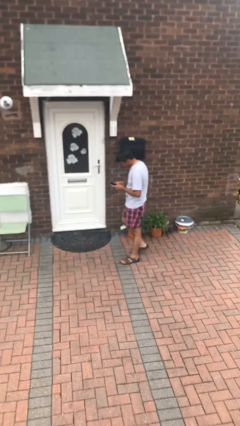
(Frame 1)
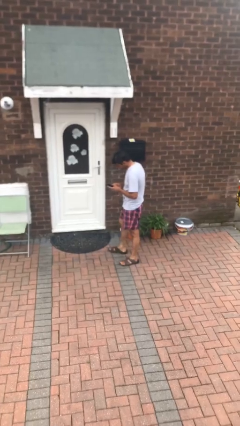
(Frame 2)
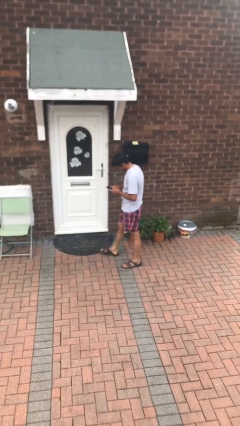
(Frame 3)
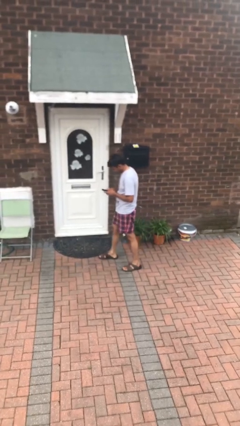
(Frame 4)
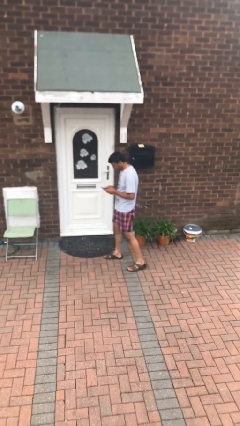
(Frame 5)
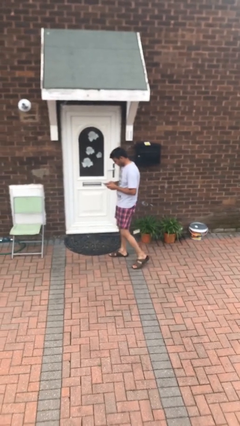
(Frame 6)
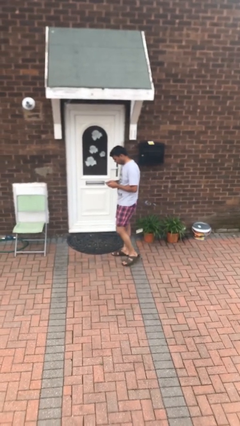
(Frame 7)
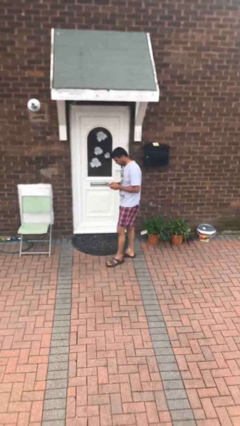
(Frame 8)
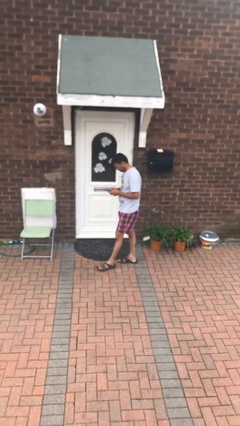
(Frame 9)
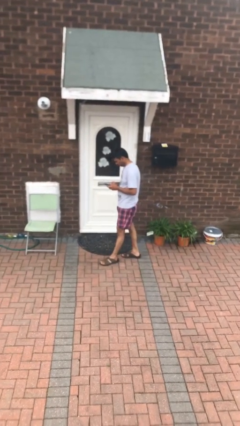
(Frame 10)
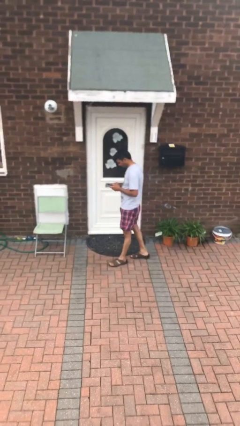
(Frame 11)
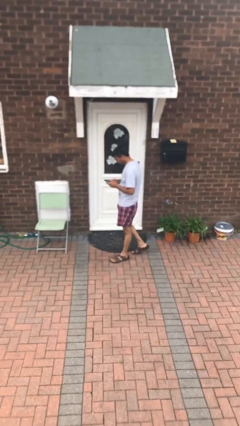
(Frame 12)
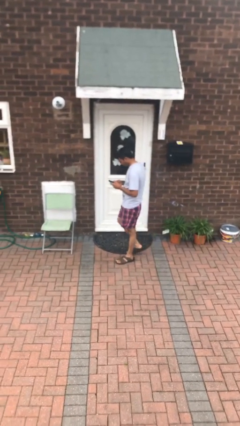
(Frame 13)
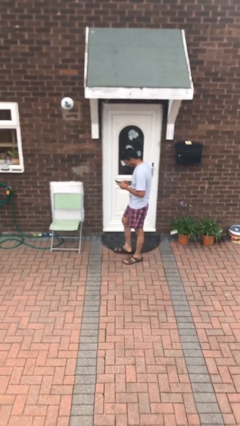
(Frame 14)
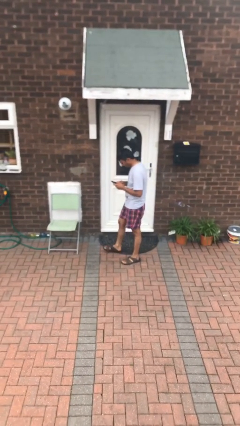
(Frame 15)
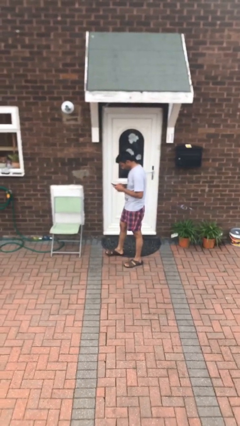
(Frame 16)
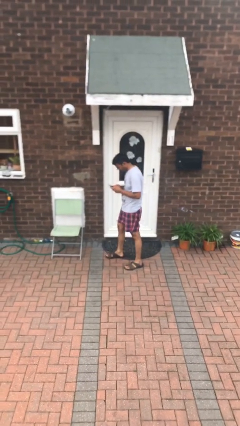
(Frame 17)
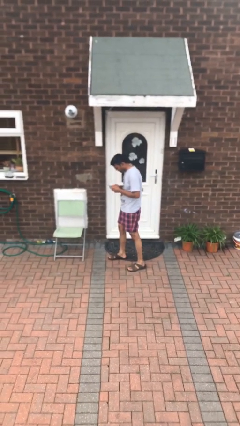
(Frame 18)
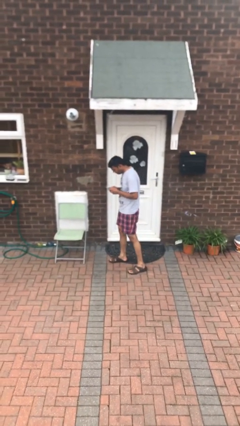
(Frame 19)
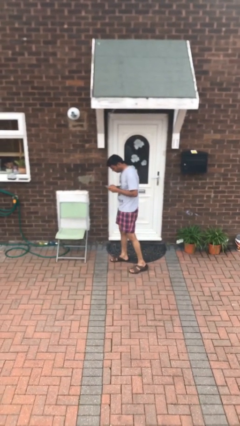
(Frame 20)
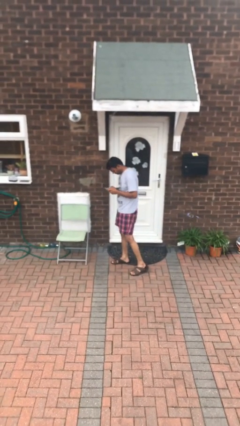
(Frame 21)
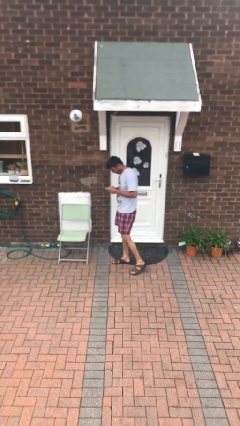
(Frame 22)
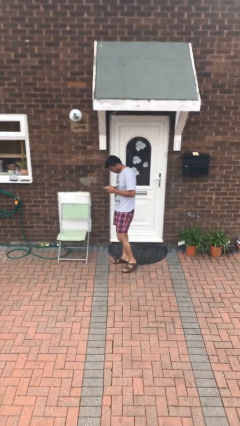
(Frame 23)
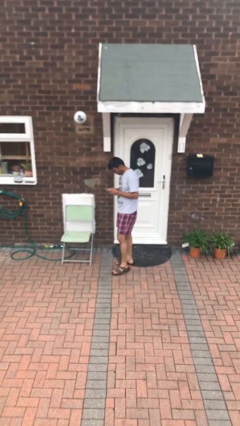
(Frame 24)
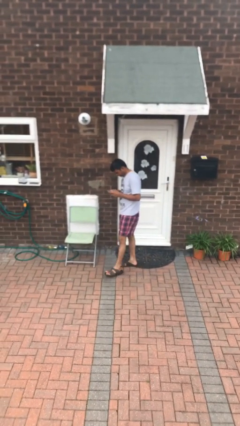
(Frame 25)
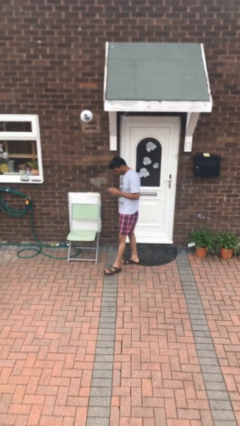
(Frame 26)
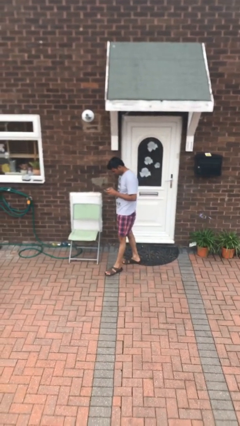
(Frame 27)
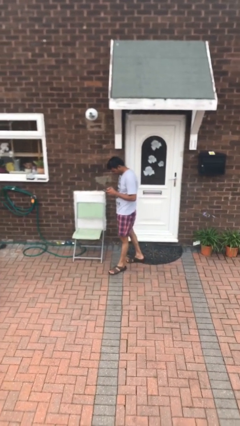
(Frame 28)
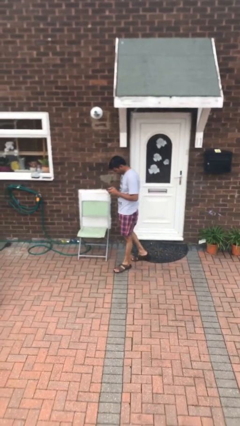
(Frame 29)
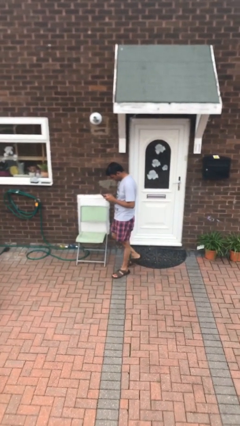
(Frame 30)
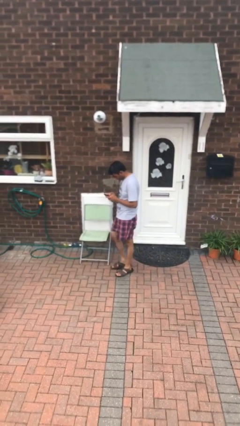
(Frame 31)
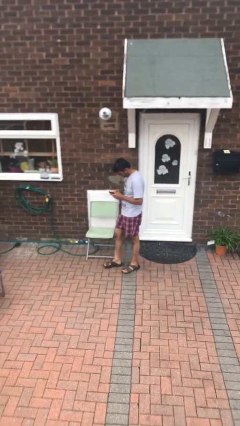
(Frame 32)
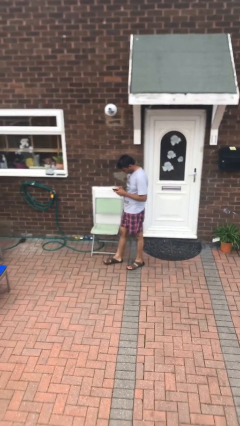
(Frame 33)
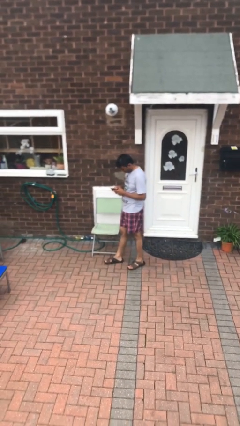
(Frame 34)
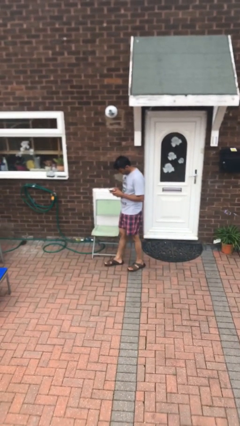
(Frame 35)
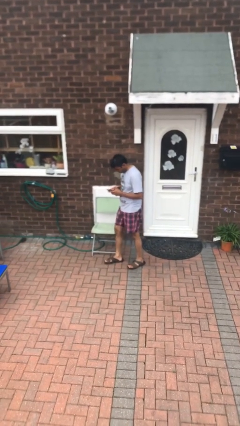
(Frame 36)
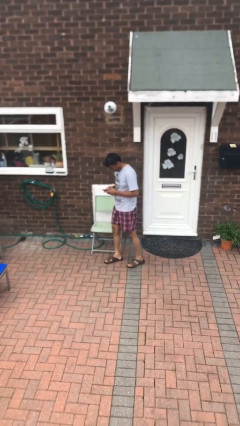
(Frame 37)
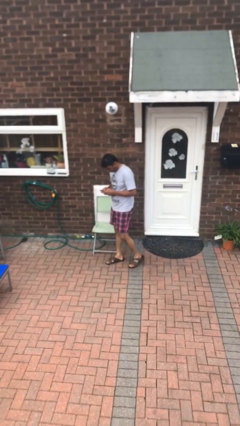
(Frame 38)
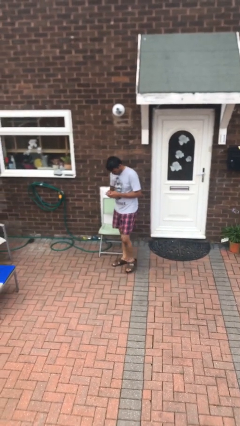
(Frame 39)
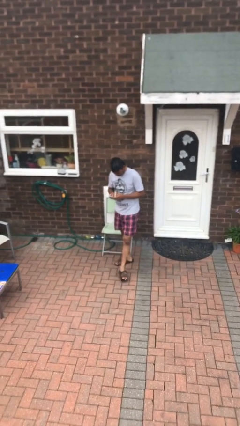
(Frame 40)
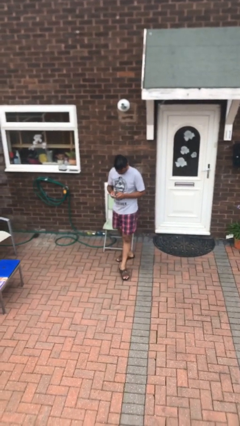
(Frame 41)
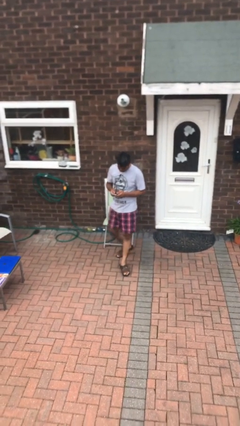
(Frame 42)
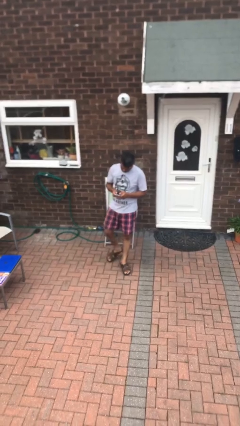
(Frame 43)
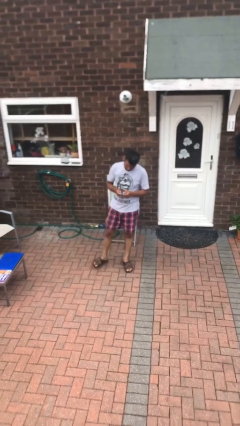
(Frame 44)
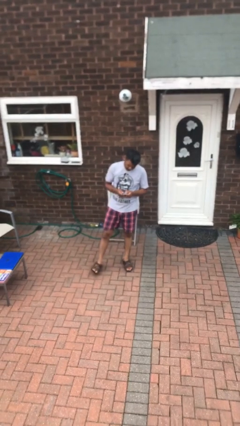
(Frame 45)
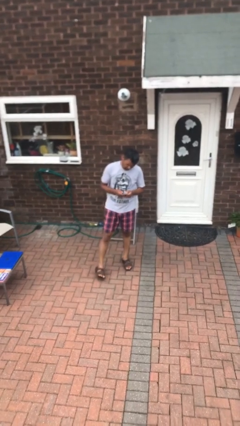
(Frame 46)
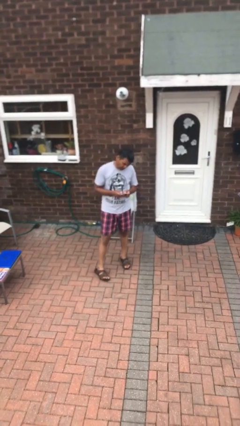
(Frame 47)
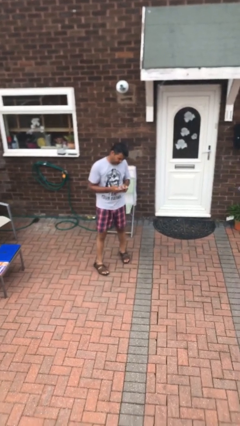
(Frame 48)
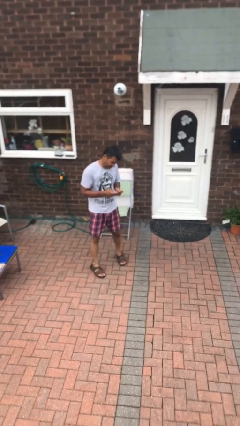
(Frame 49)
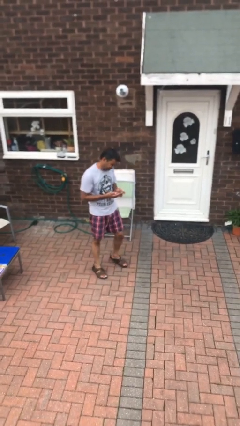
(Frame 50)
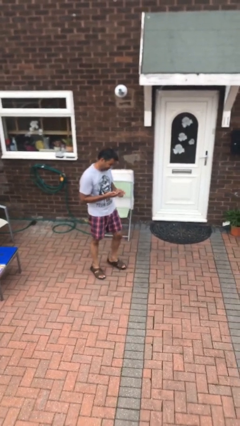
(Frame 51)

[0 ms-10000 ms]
person texts on phone

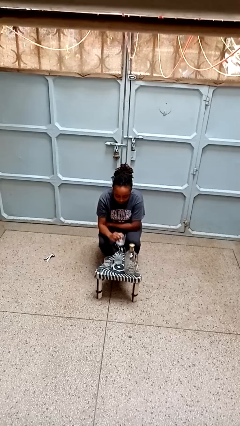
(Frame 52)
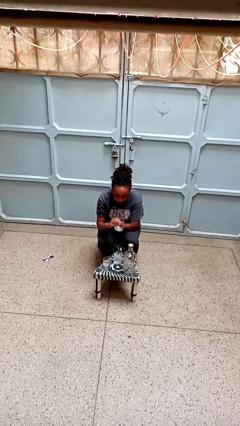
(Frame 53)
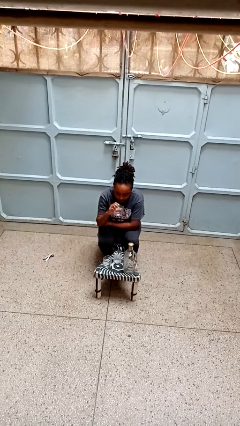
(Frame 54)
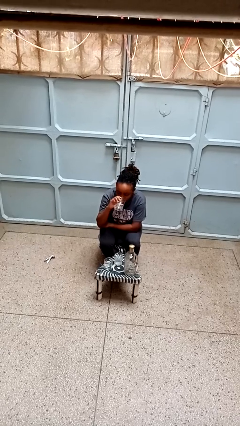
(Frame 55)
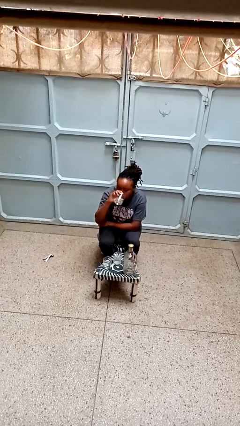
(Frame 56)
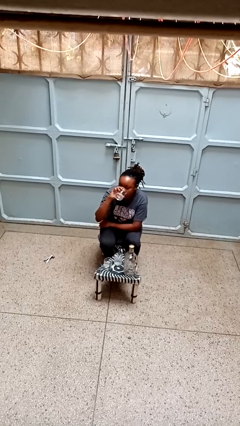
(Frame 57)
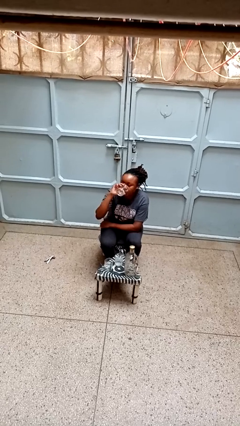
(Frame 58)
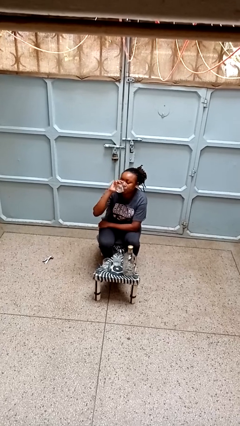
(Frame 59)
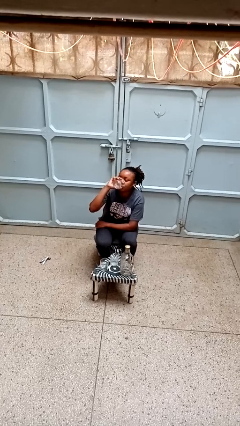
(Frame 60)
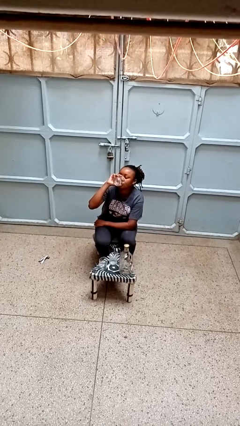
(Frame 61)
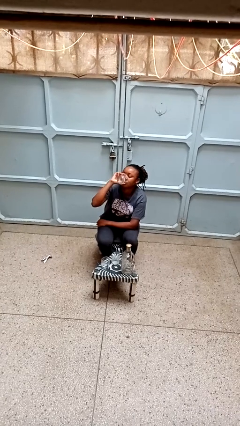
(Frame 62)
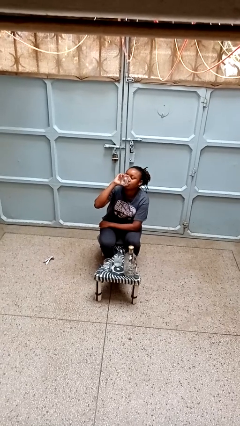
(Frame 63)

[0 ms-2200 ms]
person drinks from shotglass

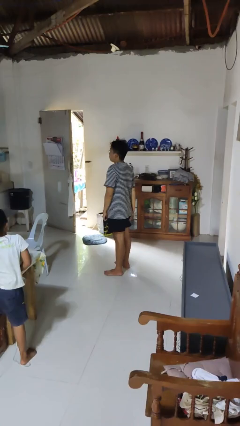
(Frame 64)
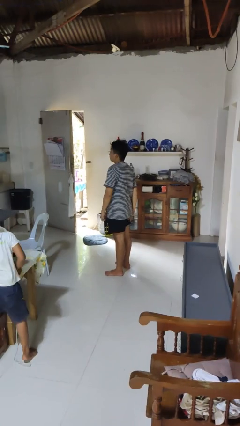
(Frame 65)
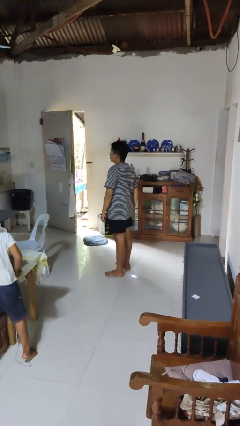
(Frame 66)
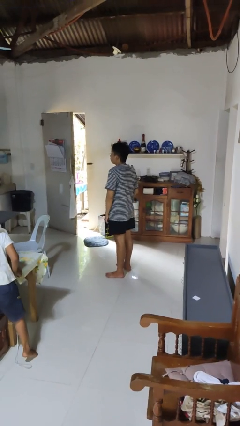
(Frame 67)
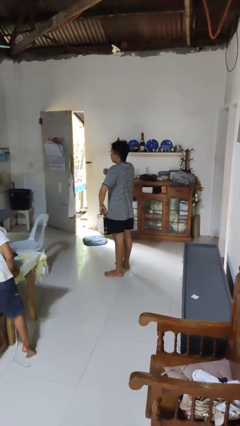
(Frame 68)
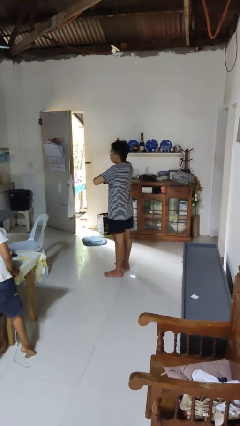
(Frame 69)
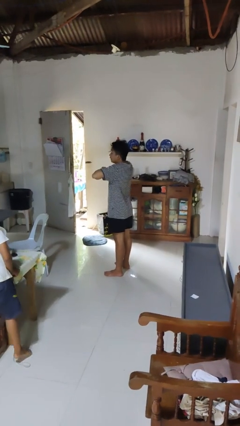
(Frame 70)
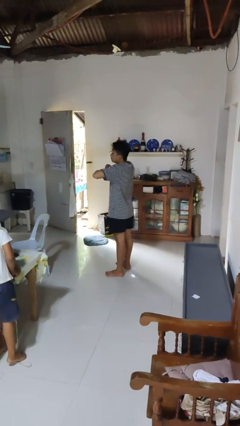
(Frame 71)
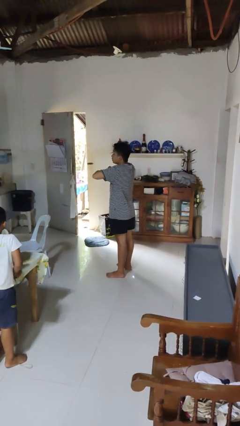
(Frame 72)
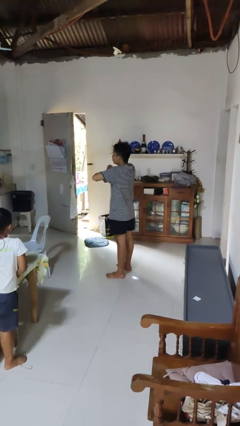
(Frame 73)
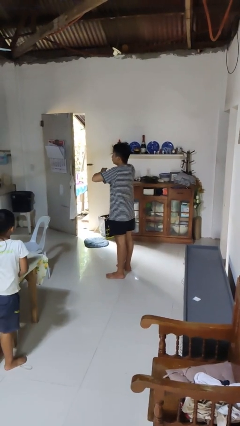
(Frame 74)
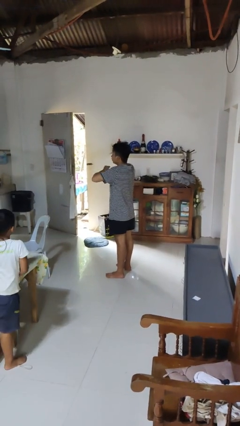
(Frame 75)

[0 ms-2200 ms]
person drums on chest

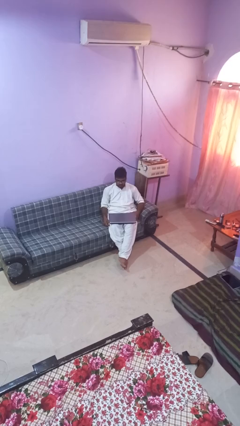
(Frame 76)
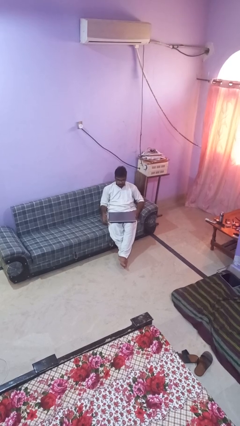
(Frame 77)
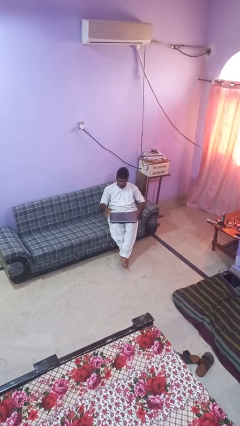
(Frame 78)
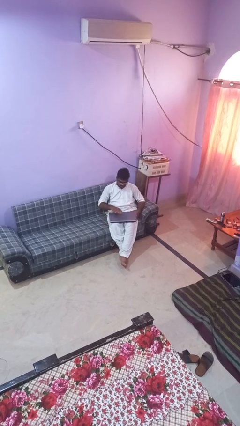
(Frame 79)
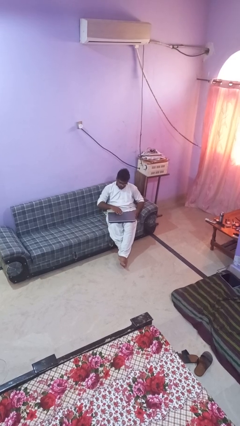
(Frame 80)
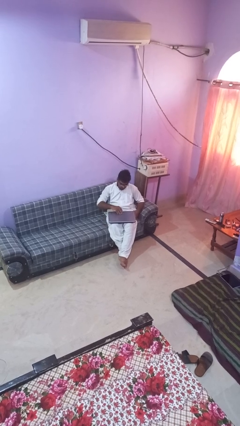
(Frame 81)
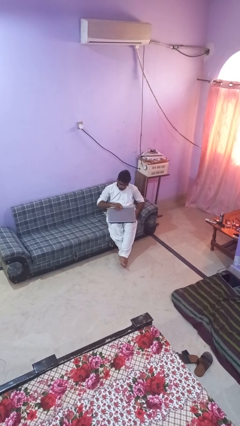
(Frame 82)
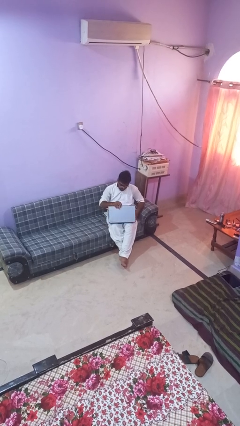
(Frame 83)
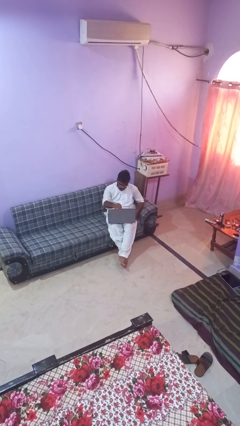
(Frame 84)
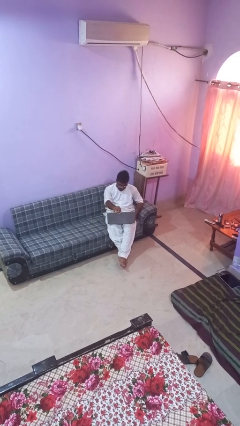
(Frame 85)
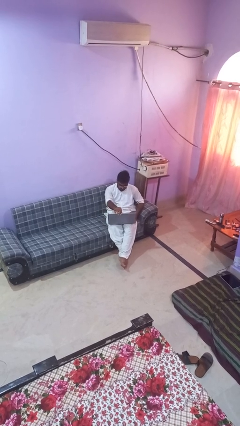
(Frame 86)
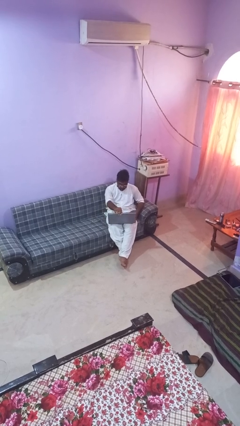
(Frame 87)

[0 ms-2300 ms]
person opens laptop

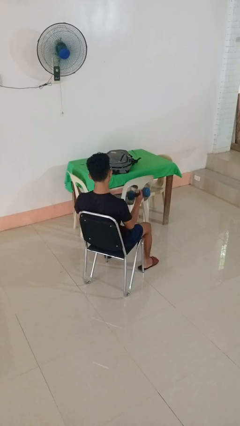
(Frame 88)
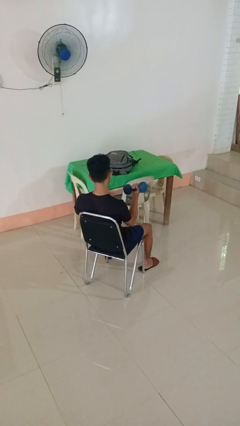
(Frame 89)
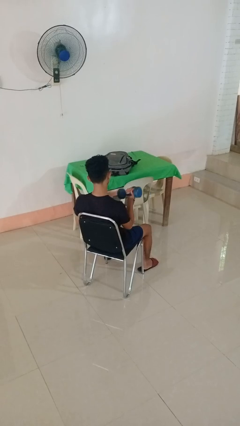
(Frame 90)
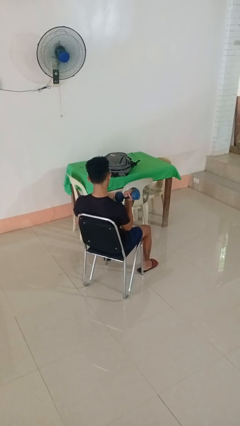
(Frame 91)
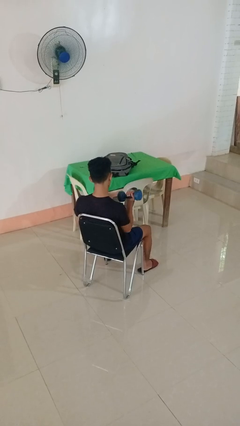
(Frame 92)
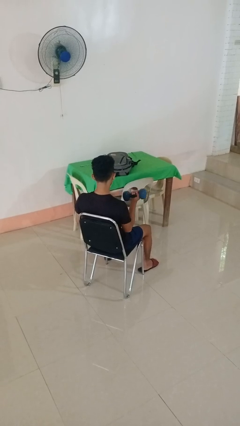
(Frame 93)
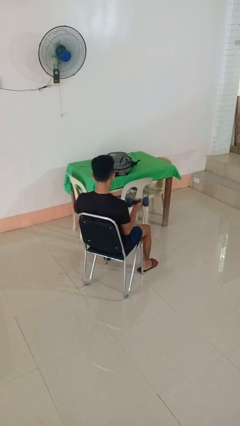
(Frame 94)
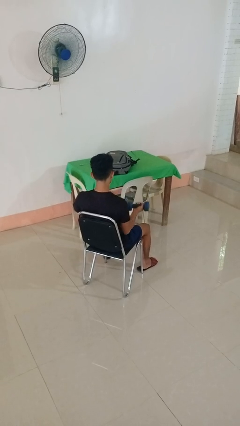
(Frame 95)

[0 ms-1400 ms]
person lifts dumbbells
